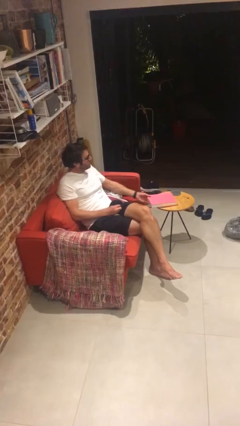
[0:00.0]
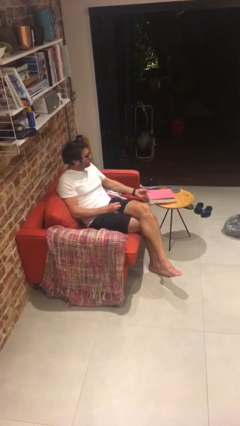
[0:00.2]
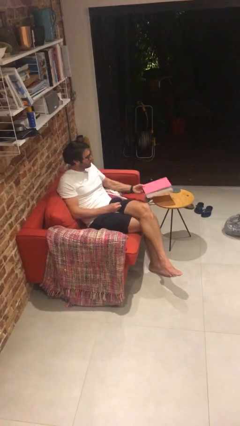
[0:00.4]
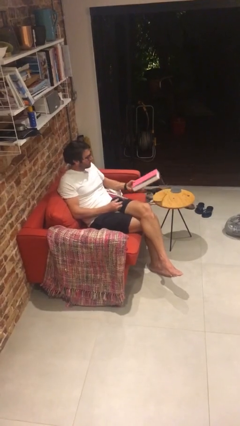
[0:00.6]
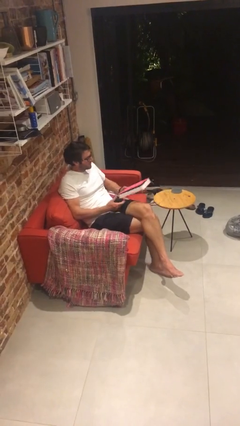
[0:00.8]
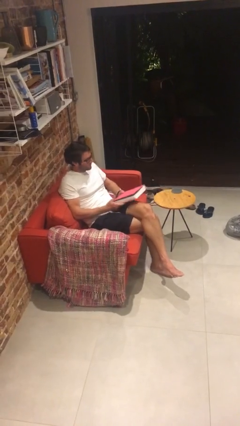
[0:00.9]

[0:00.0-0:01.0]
person picks up object from table

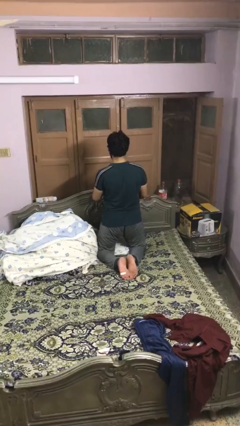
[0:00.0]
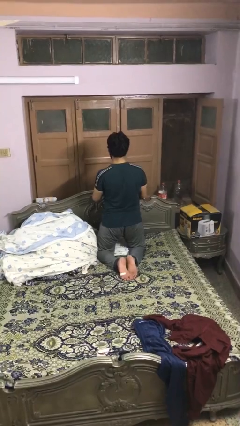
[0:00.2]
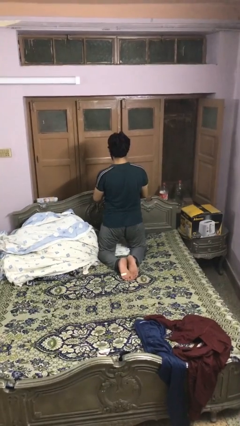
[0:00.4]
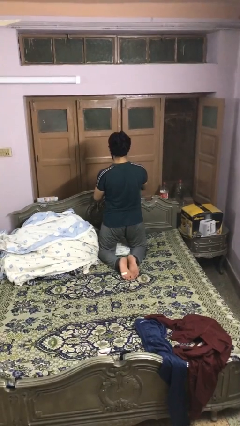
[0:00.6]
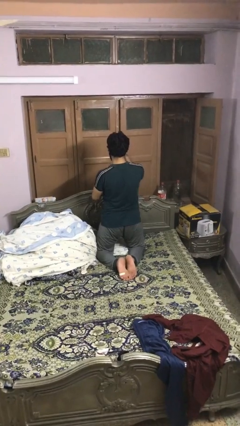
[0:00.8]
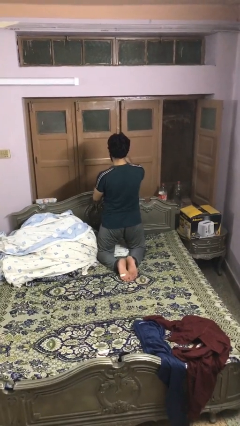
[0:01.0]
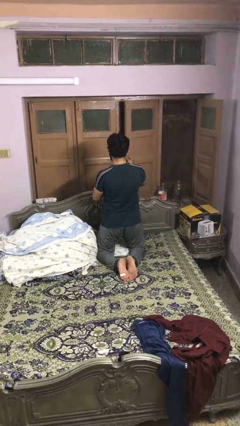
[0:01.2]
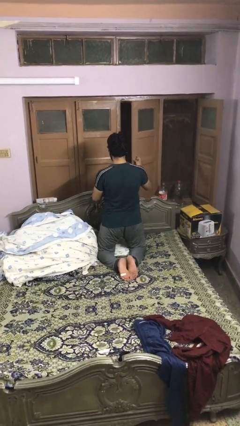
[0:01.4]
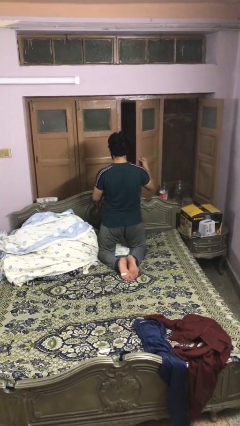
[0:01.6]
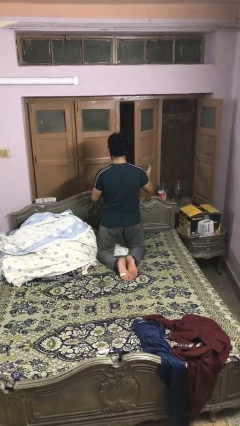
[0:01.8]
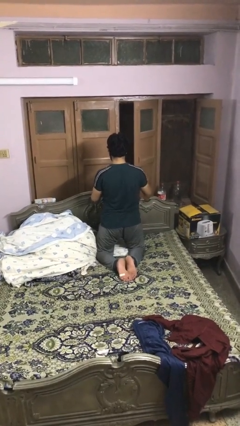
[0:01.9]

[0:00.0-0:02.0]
person opens home window

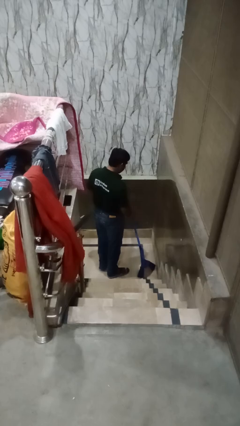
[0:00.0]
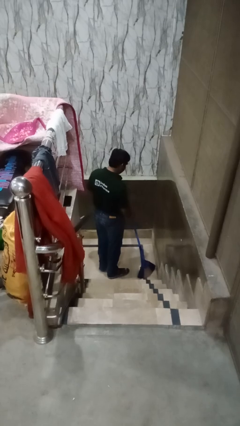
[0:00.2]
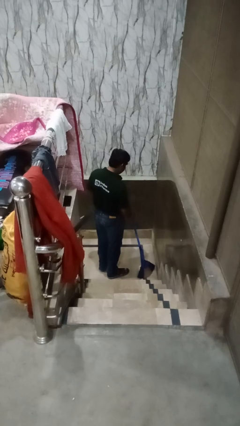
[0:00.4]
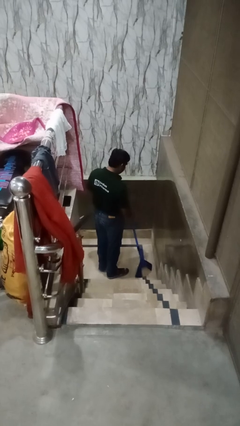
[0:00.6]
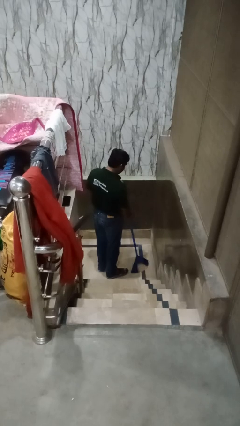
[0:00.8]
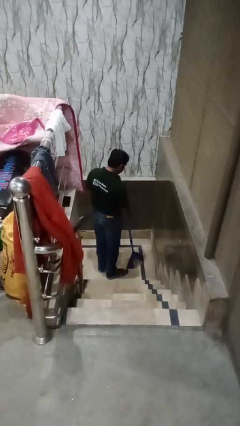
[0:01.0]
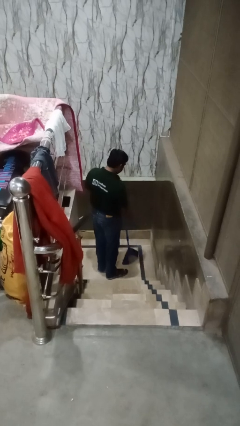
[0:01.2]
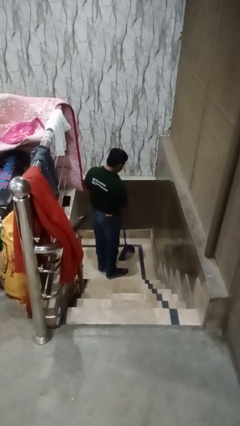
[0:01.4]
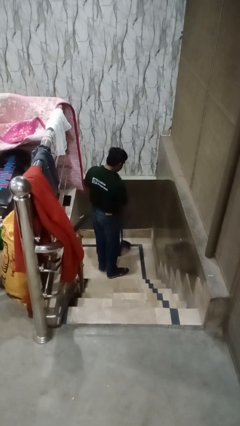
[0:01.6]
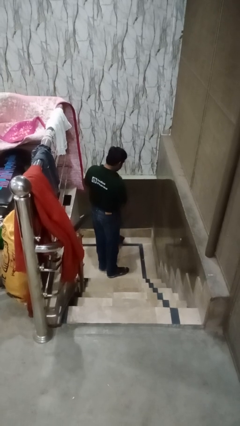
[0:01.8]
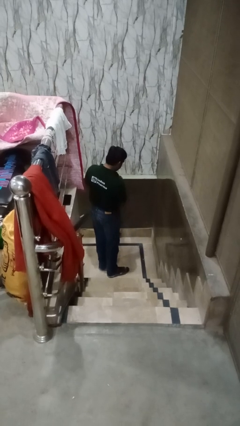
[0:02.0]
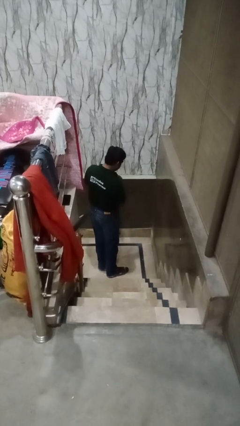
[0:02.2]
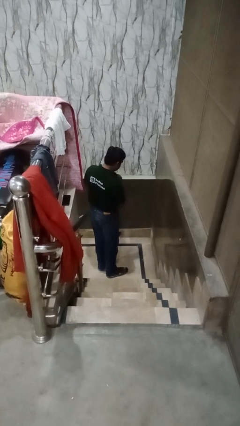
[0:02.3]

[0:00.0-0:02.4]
person sweeps floor

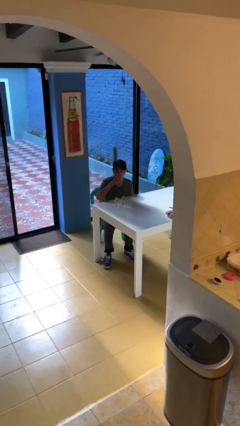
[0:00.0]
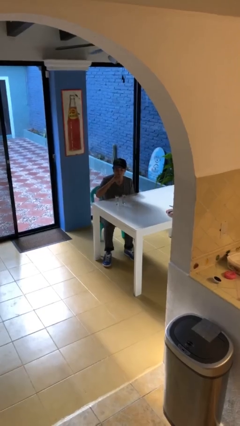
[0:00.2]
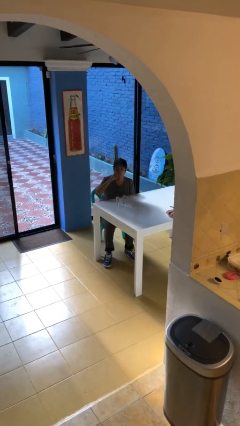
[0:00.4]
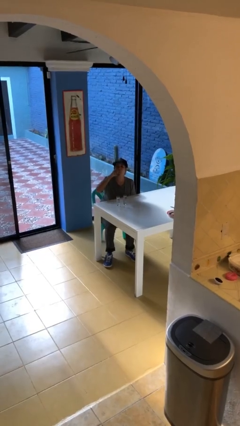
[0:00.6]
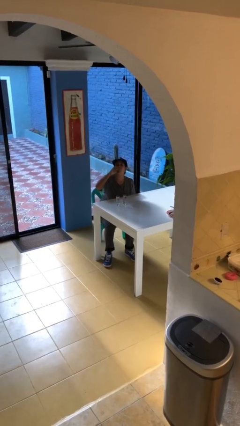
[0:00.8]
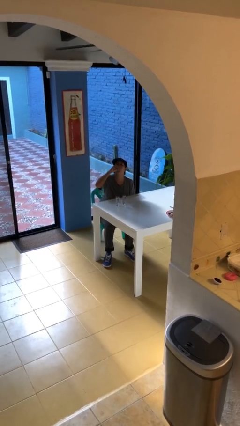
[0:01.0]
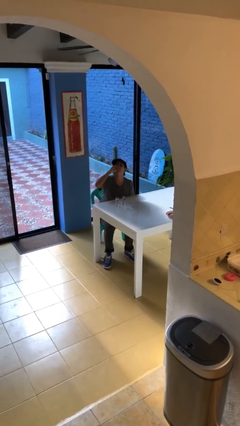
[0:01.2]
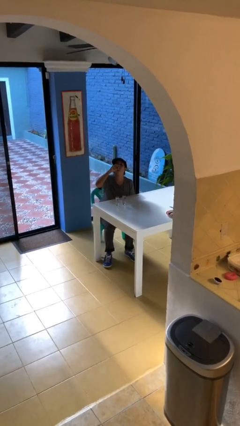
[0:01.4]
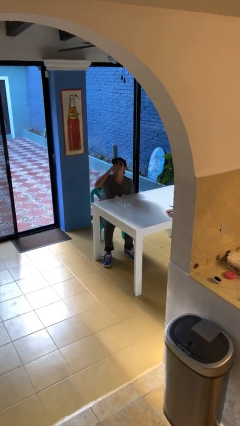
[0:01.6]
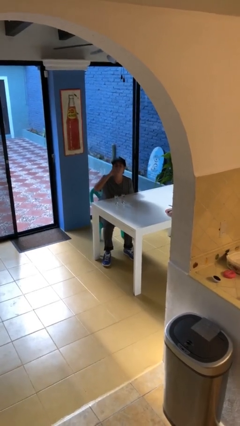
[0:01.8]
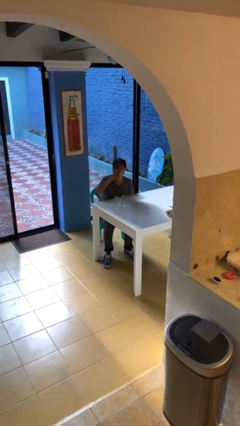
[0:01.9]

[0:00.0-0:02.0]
person drinks from shotglass

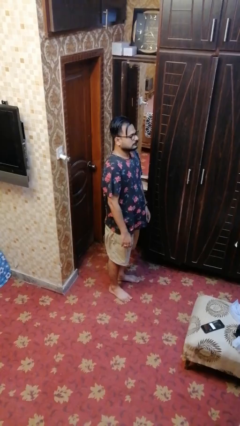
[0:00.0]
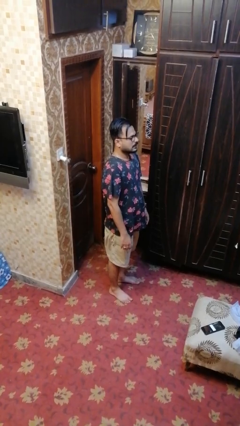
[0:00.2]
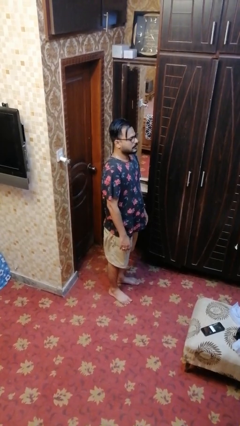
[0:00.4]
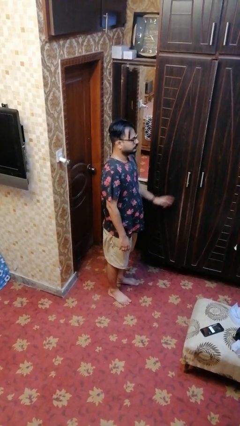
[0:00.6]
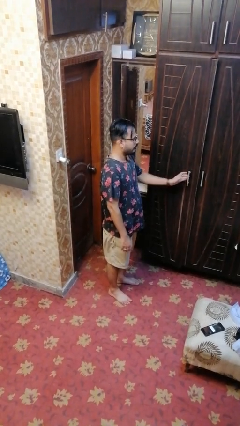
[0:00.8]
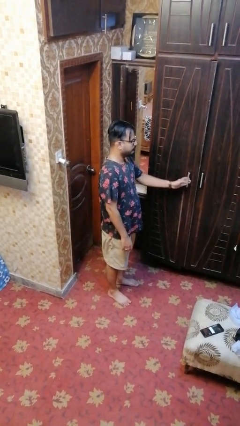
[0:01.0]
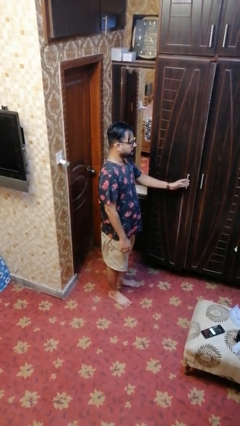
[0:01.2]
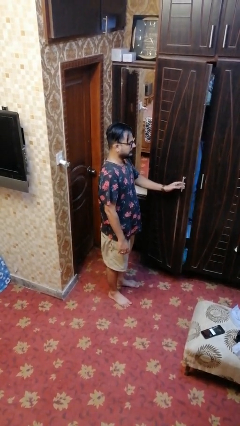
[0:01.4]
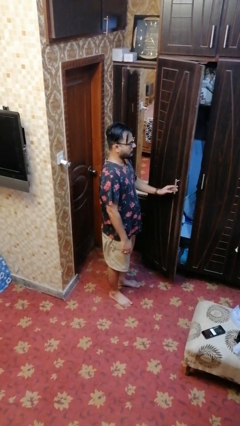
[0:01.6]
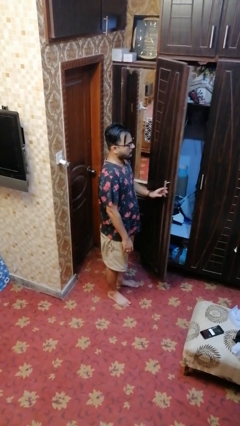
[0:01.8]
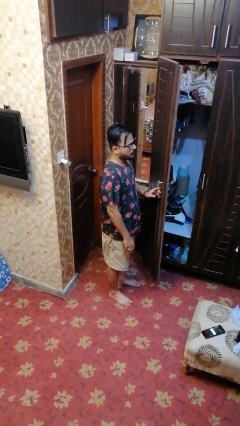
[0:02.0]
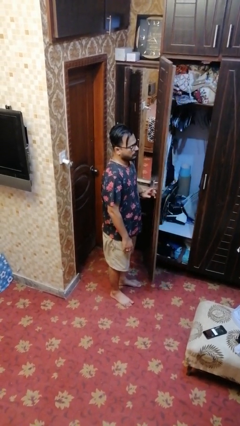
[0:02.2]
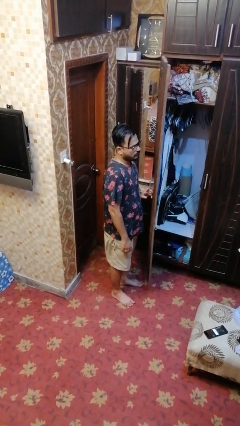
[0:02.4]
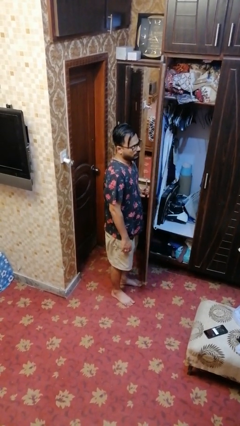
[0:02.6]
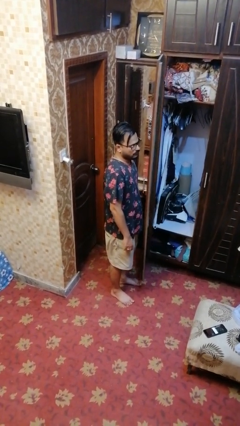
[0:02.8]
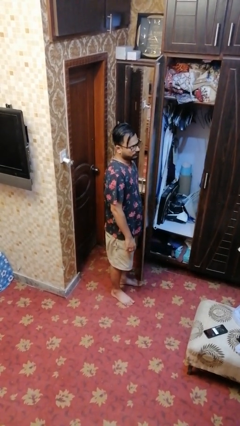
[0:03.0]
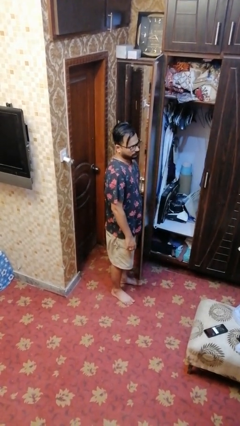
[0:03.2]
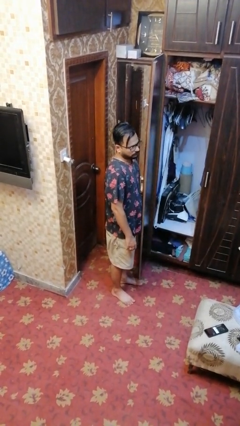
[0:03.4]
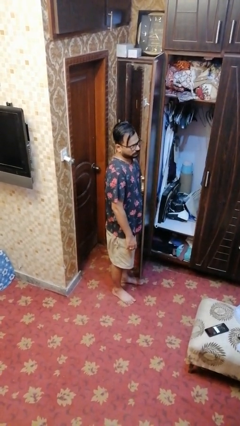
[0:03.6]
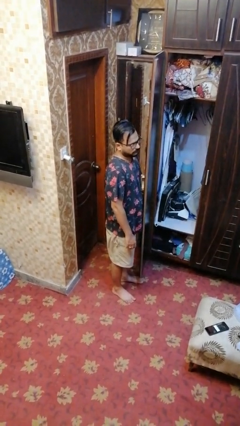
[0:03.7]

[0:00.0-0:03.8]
person opens closet door

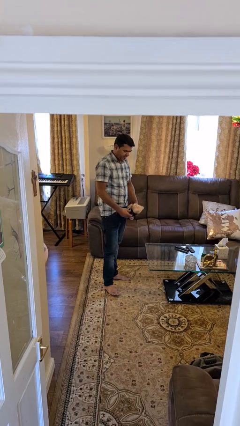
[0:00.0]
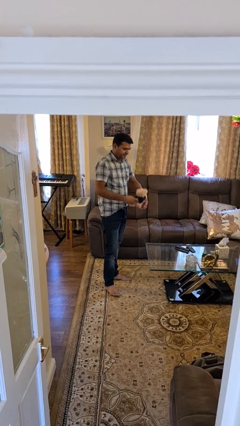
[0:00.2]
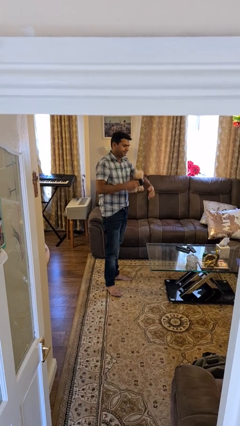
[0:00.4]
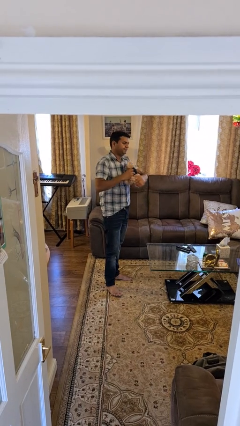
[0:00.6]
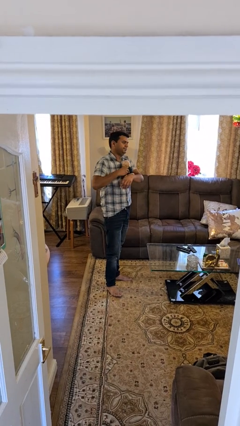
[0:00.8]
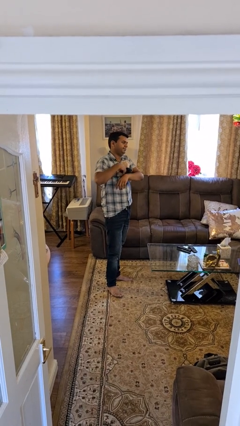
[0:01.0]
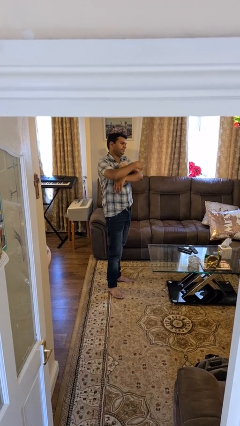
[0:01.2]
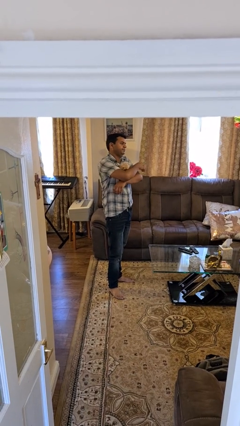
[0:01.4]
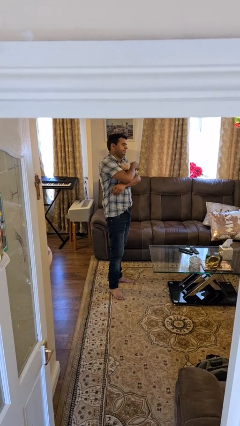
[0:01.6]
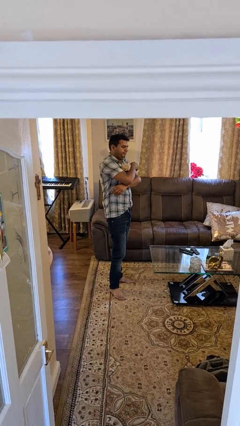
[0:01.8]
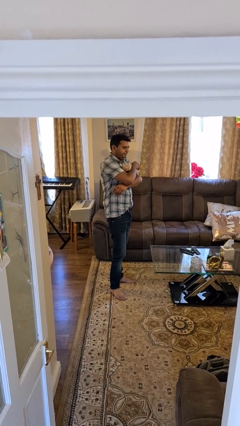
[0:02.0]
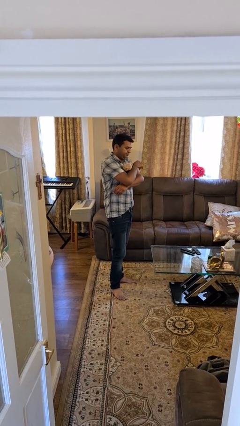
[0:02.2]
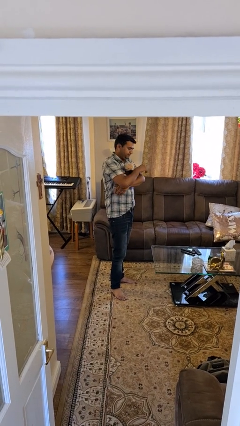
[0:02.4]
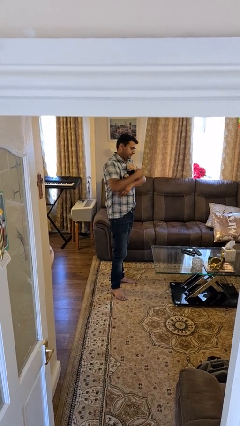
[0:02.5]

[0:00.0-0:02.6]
person hugs stuffed animal

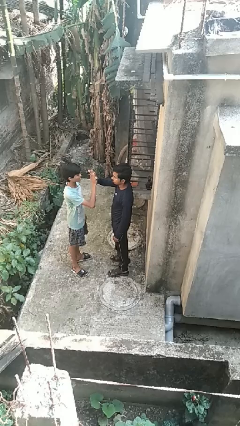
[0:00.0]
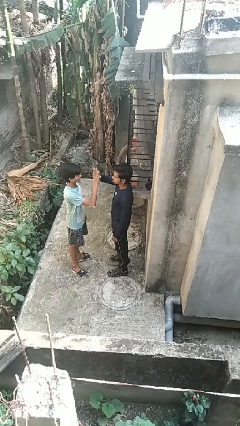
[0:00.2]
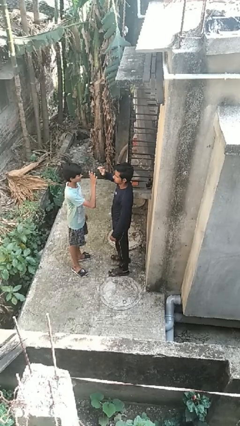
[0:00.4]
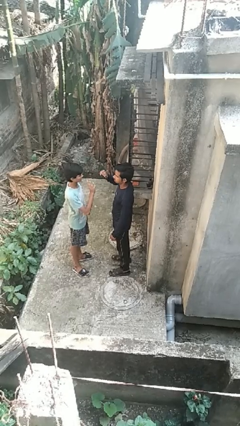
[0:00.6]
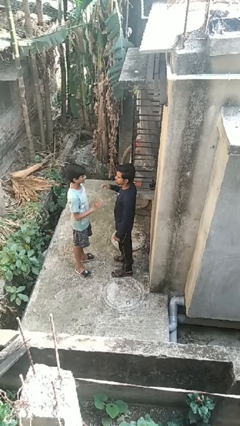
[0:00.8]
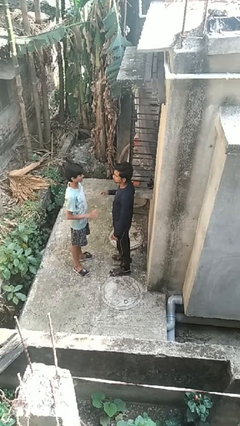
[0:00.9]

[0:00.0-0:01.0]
person highfives hand

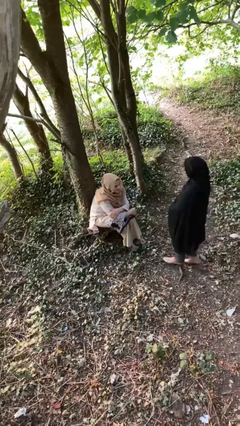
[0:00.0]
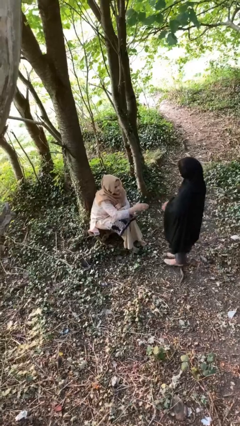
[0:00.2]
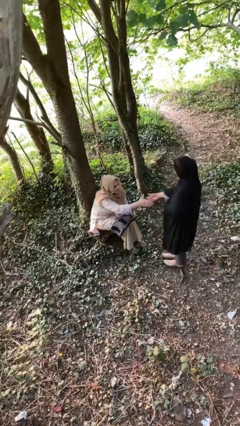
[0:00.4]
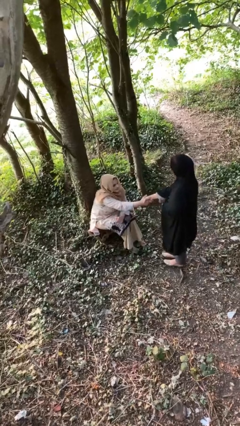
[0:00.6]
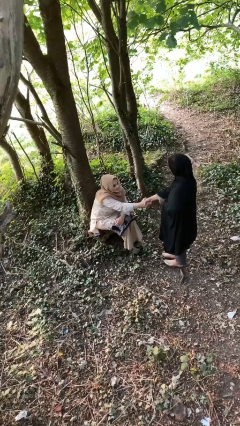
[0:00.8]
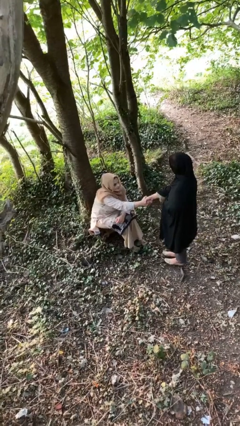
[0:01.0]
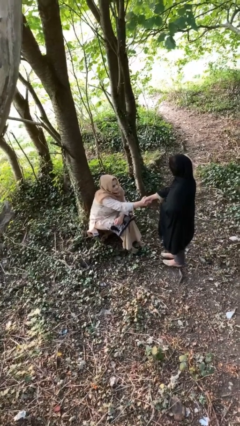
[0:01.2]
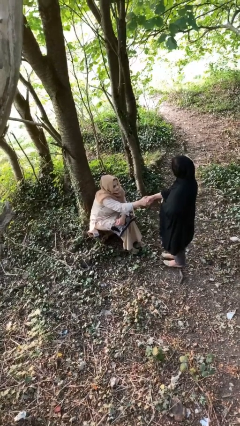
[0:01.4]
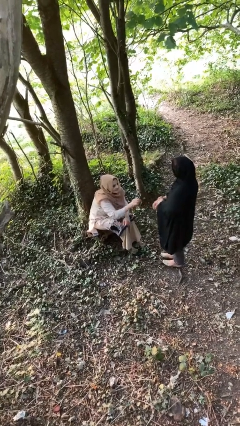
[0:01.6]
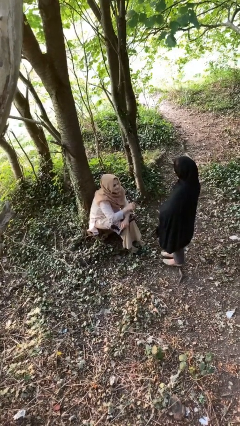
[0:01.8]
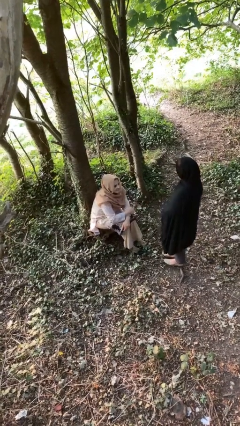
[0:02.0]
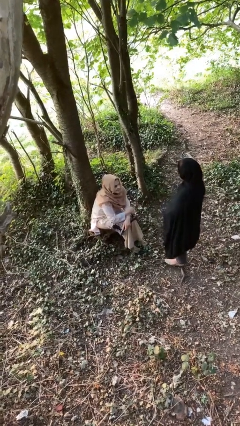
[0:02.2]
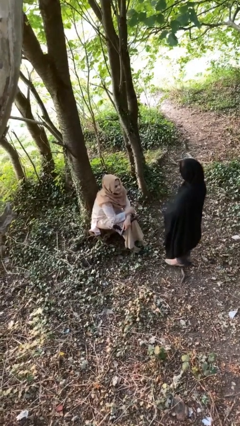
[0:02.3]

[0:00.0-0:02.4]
person shakes hand
